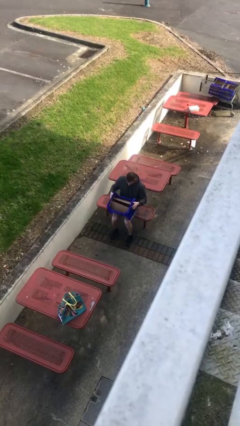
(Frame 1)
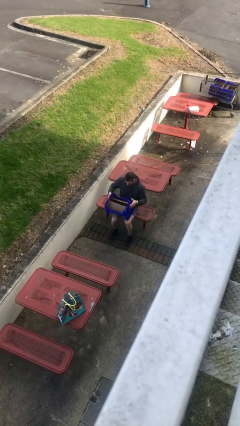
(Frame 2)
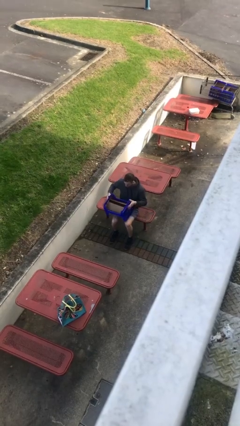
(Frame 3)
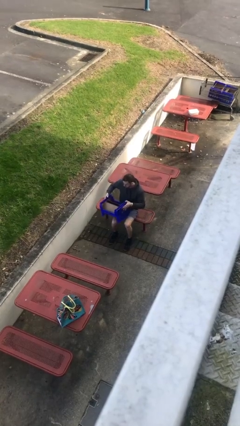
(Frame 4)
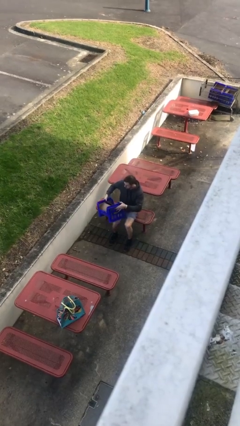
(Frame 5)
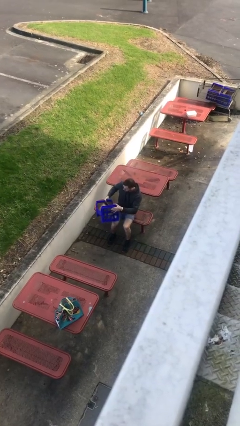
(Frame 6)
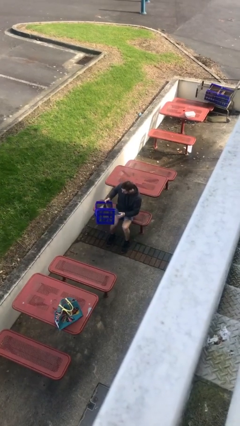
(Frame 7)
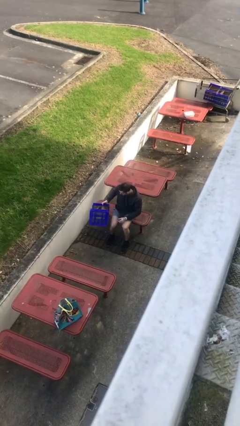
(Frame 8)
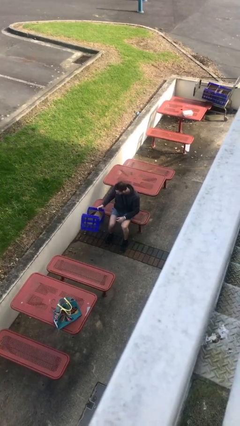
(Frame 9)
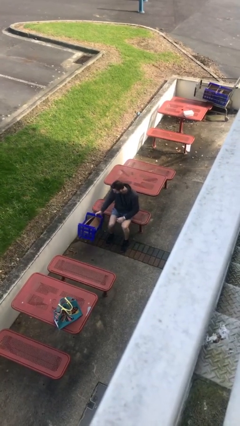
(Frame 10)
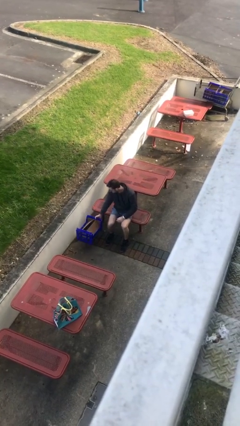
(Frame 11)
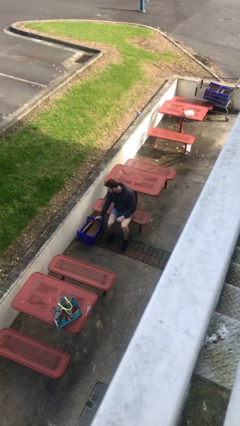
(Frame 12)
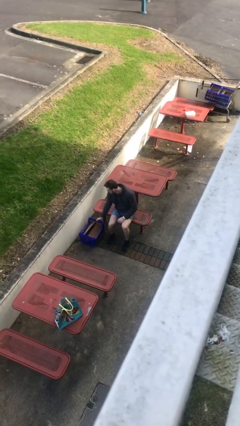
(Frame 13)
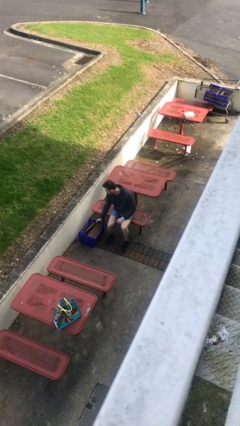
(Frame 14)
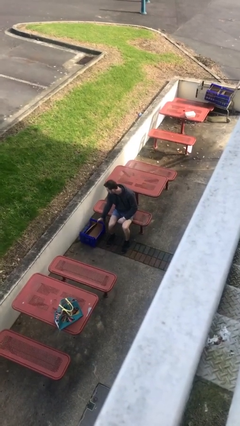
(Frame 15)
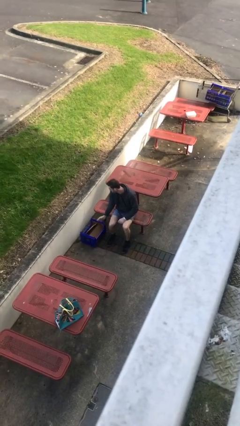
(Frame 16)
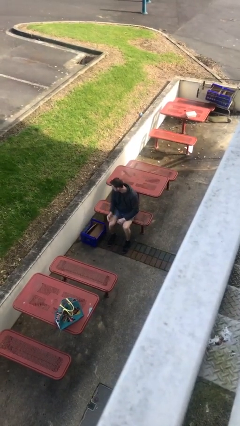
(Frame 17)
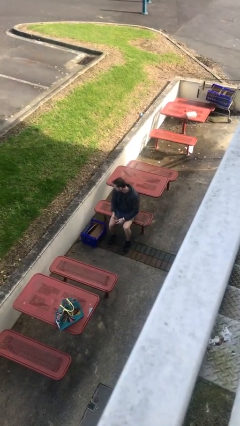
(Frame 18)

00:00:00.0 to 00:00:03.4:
person puts down object on floor

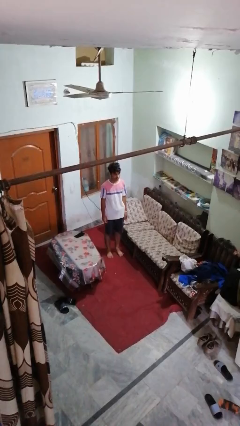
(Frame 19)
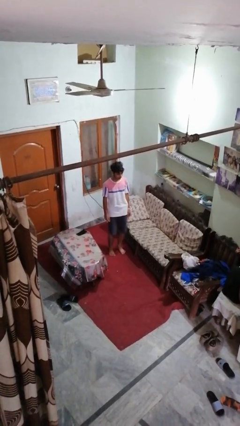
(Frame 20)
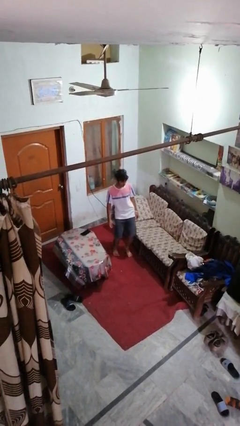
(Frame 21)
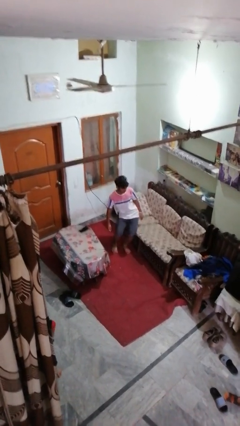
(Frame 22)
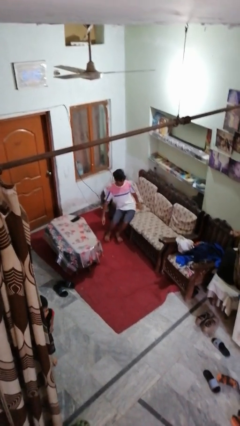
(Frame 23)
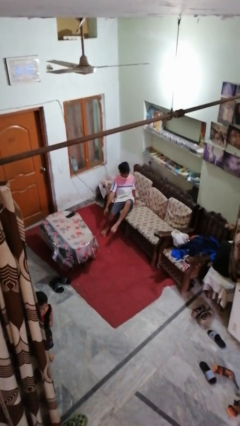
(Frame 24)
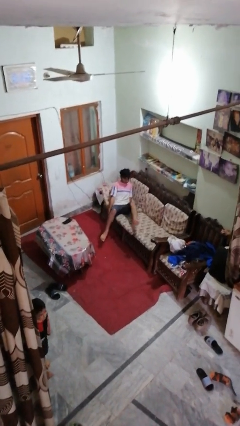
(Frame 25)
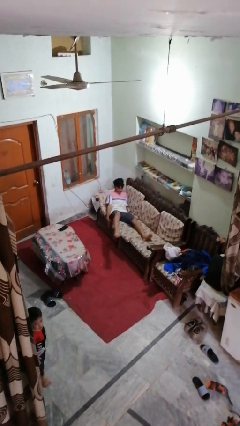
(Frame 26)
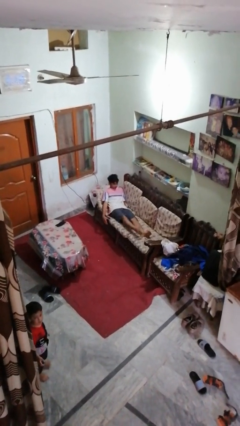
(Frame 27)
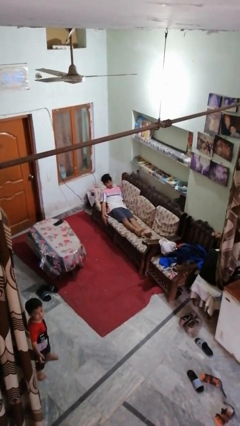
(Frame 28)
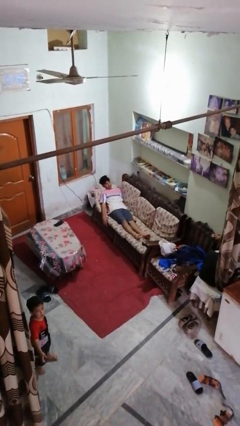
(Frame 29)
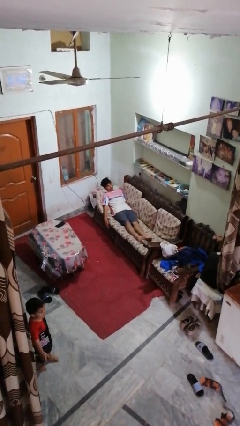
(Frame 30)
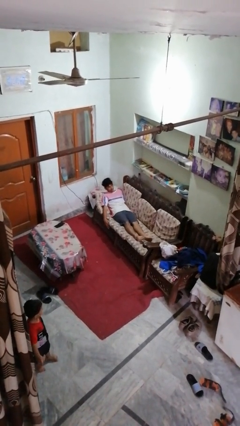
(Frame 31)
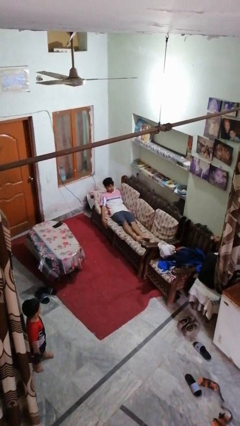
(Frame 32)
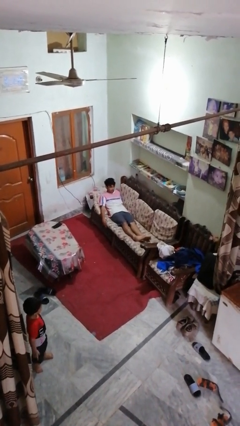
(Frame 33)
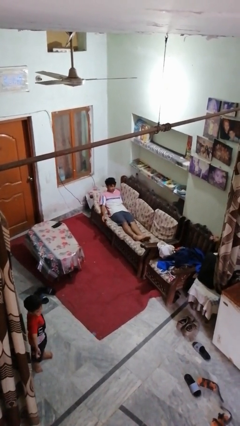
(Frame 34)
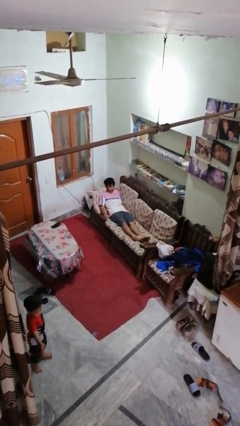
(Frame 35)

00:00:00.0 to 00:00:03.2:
person lies down on couch

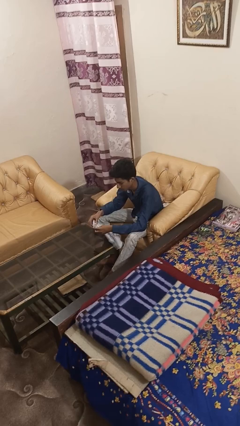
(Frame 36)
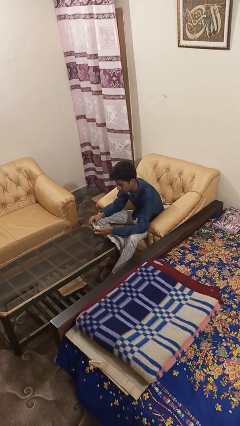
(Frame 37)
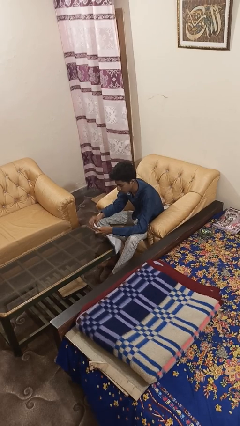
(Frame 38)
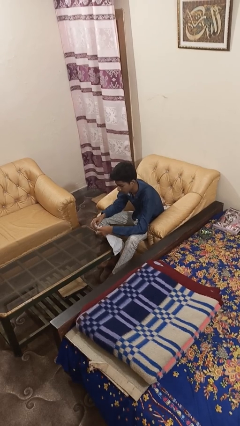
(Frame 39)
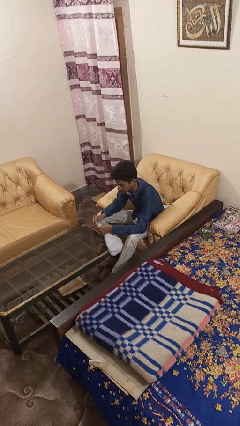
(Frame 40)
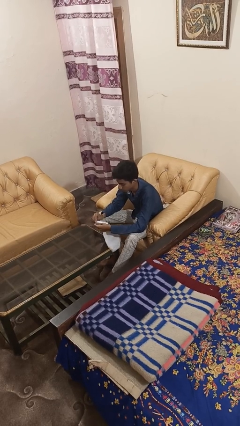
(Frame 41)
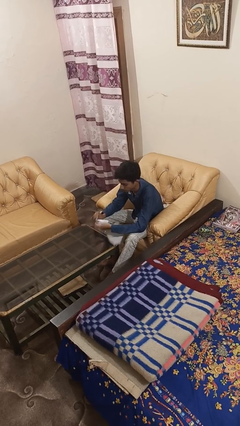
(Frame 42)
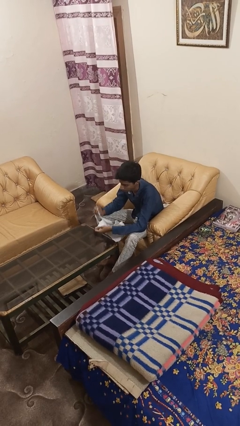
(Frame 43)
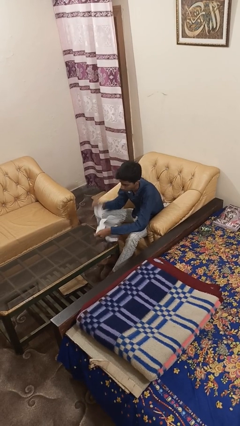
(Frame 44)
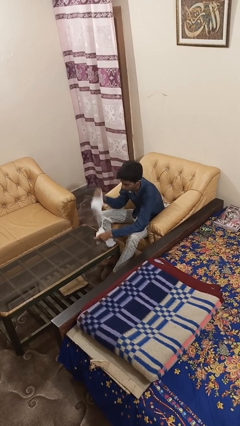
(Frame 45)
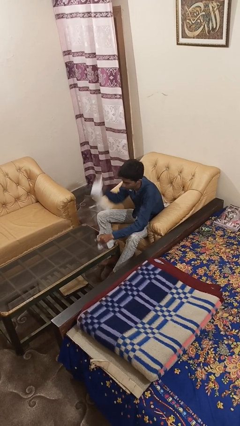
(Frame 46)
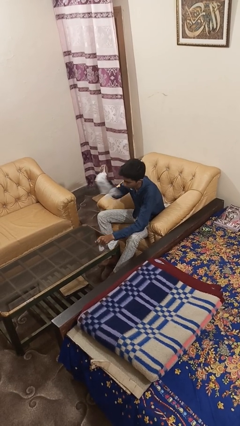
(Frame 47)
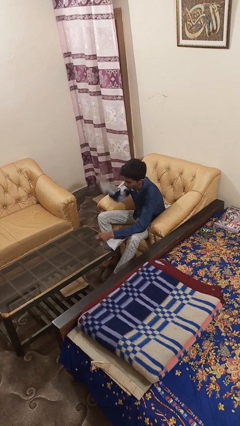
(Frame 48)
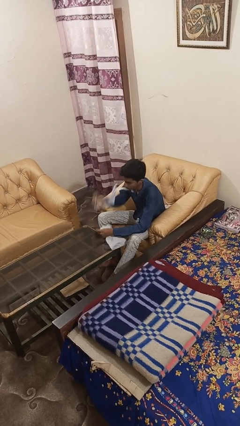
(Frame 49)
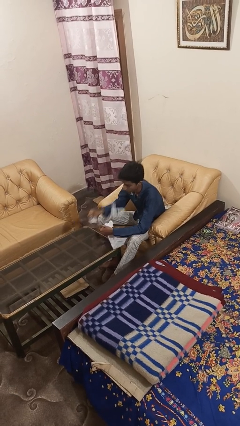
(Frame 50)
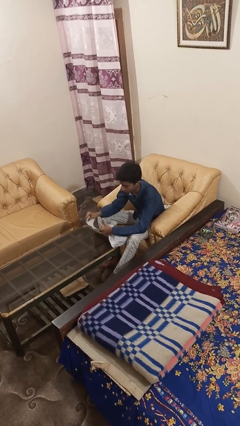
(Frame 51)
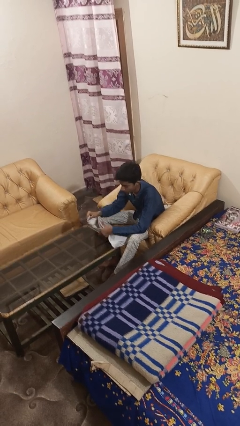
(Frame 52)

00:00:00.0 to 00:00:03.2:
person tears paper

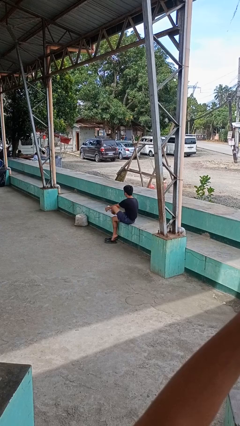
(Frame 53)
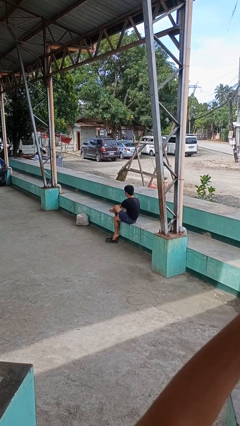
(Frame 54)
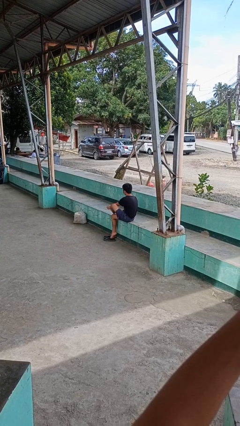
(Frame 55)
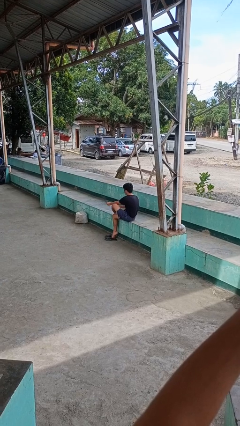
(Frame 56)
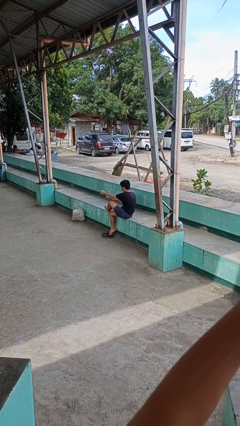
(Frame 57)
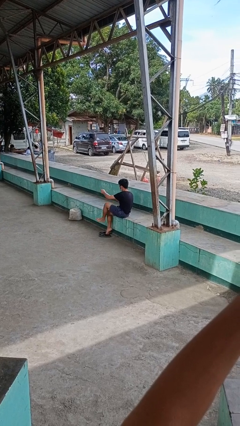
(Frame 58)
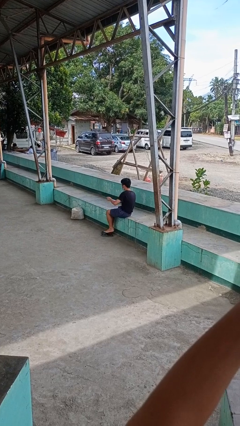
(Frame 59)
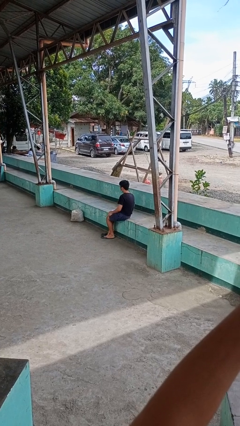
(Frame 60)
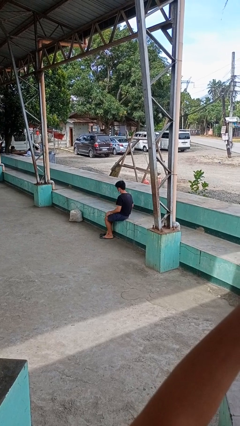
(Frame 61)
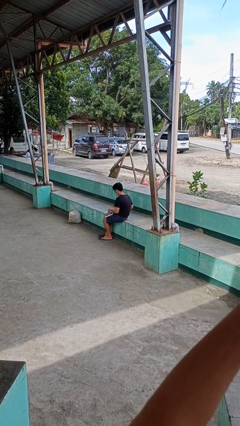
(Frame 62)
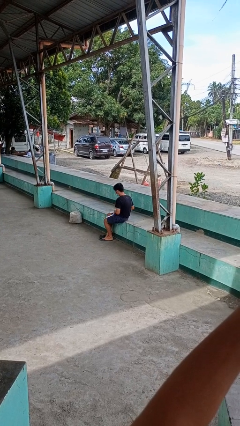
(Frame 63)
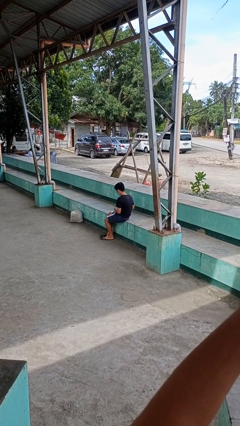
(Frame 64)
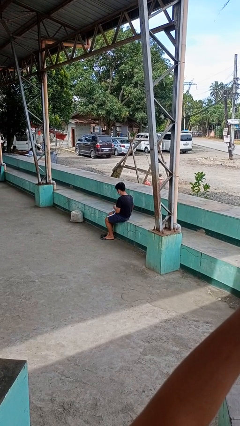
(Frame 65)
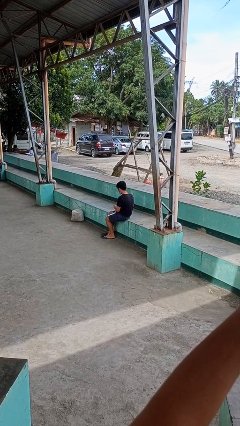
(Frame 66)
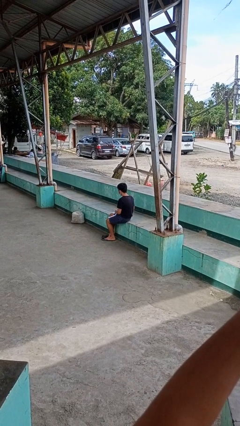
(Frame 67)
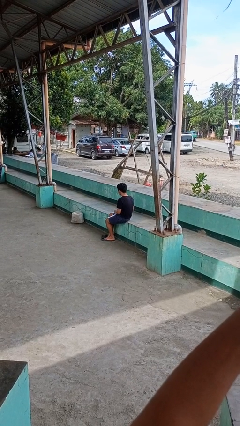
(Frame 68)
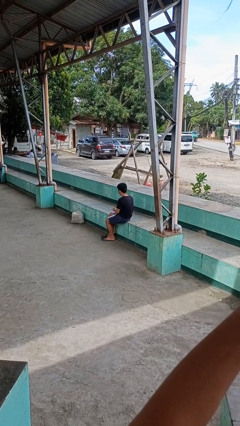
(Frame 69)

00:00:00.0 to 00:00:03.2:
person takes off socks

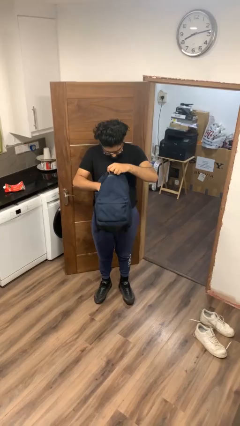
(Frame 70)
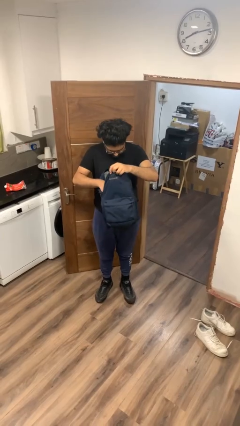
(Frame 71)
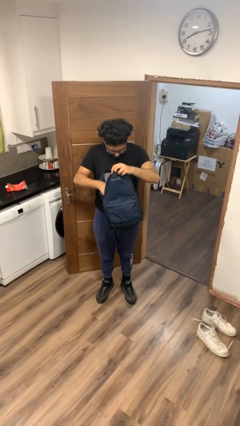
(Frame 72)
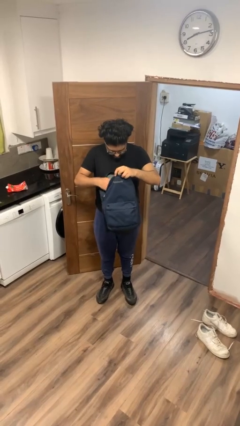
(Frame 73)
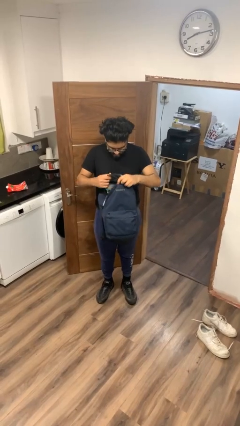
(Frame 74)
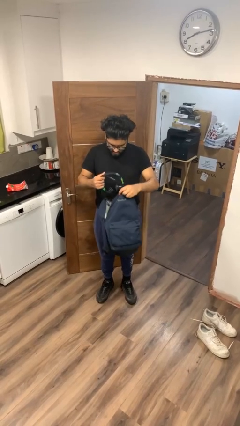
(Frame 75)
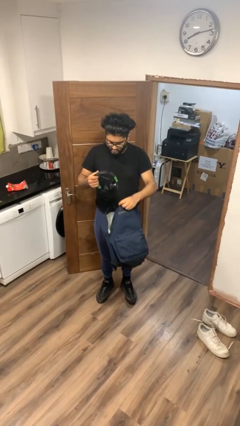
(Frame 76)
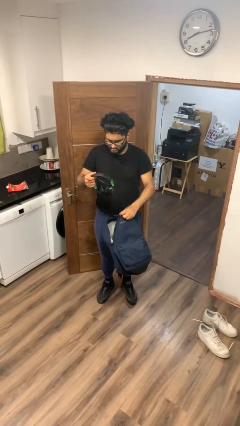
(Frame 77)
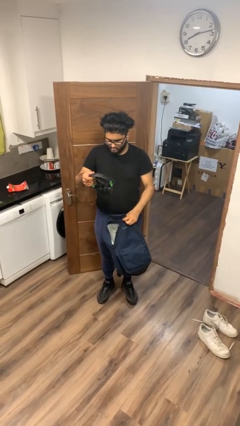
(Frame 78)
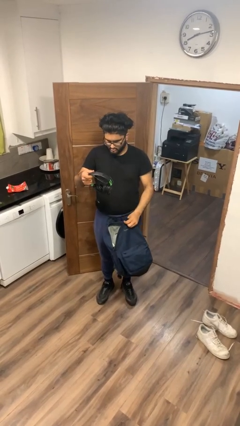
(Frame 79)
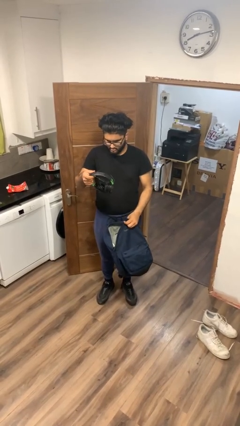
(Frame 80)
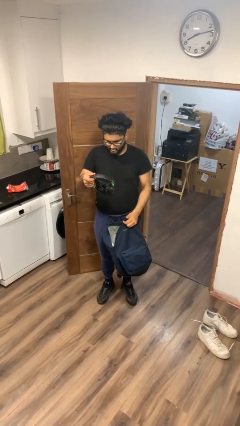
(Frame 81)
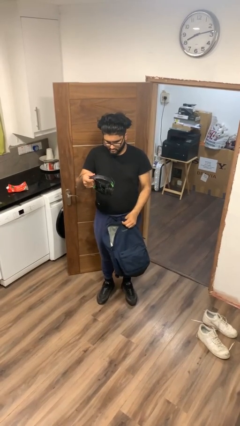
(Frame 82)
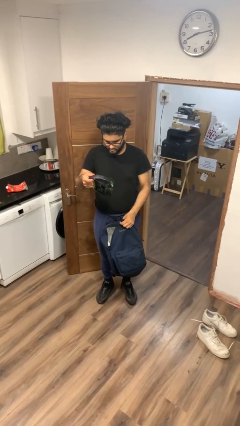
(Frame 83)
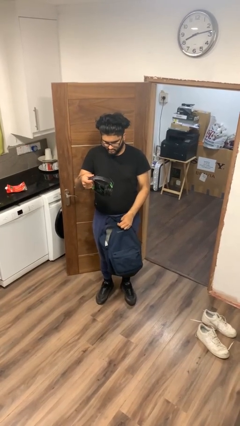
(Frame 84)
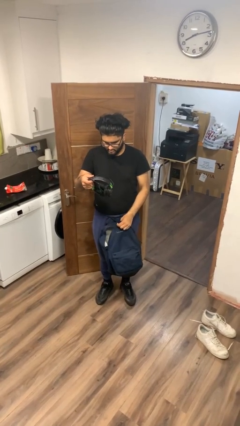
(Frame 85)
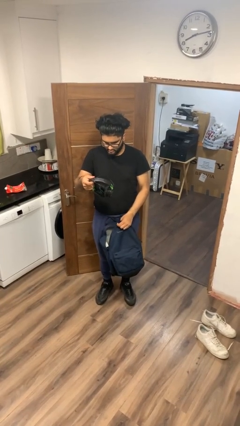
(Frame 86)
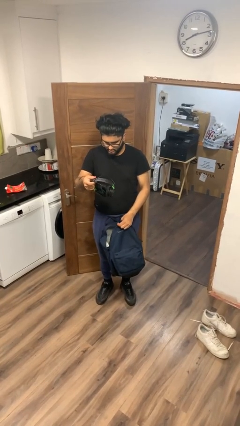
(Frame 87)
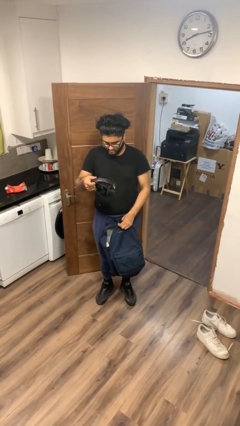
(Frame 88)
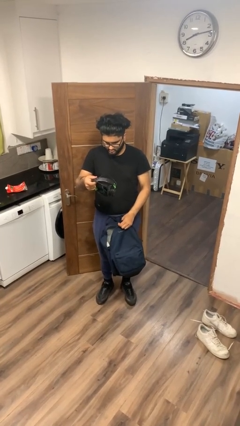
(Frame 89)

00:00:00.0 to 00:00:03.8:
person takes object from backpack

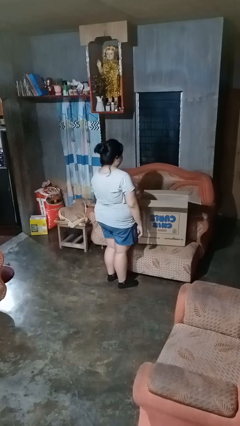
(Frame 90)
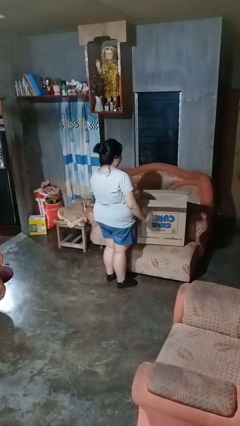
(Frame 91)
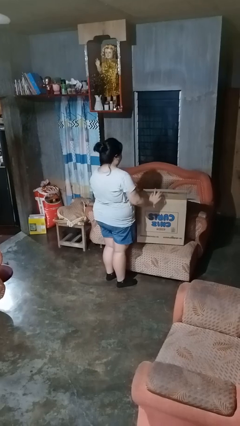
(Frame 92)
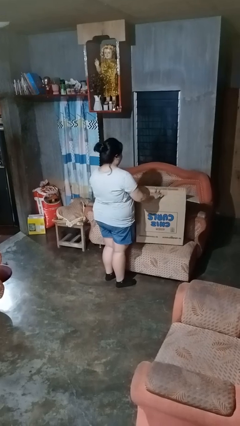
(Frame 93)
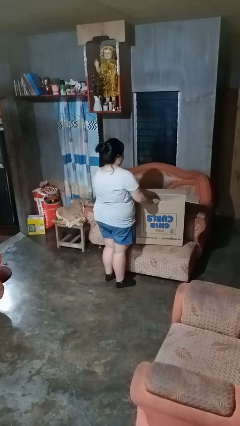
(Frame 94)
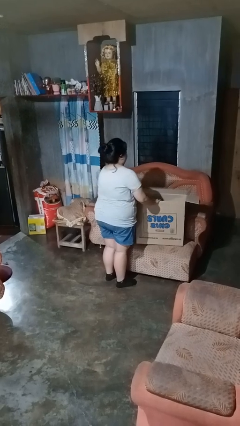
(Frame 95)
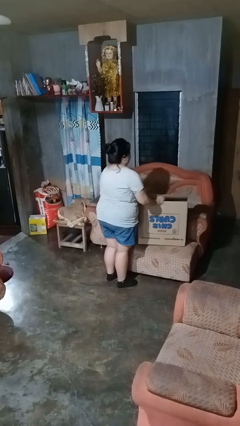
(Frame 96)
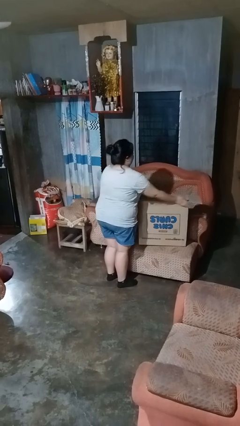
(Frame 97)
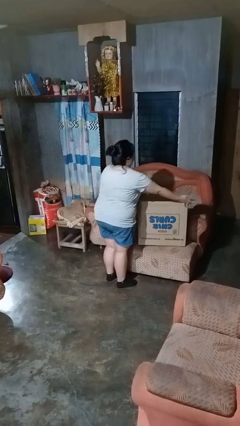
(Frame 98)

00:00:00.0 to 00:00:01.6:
person closes box
